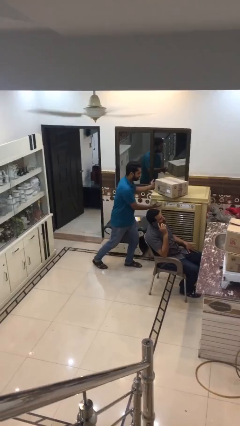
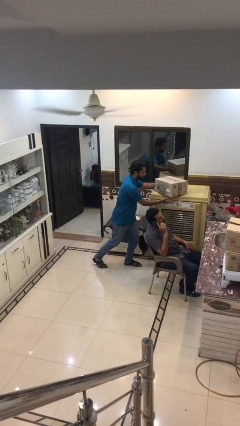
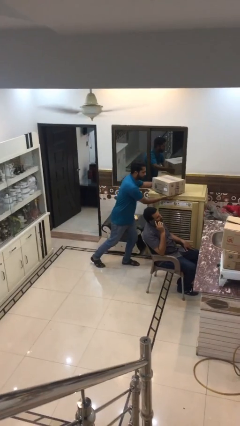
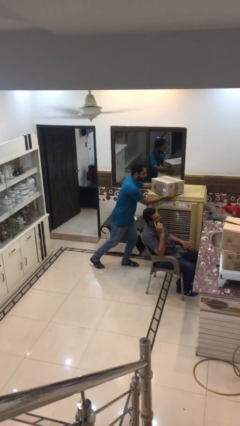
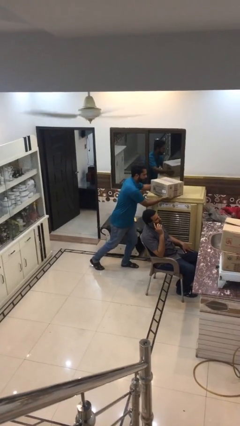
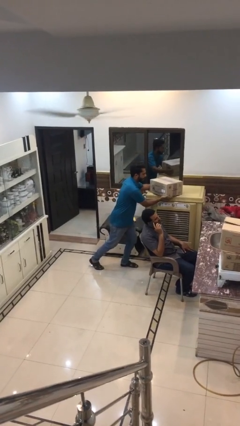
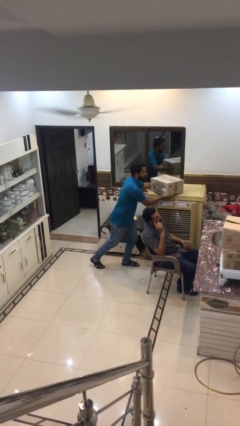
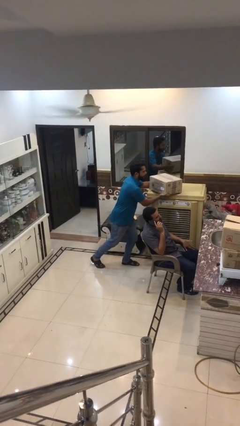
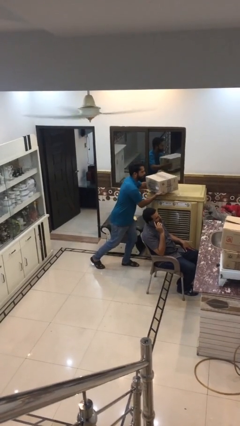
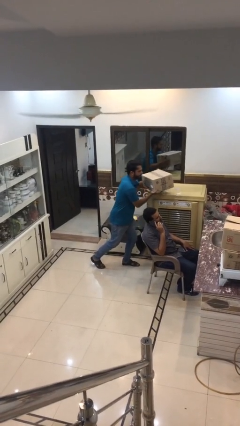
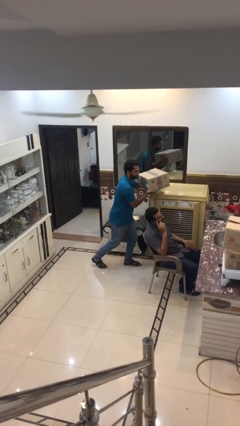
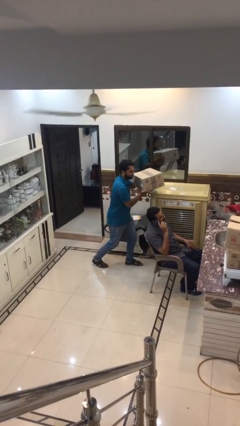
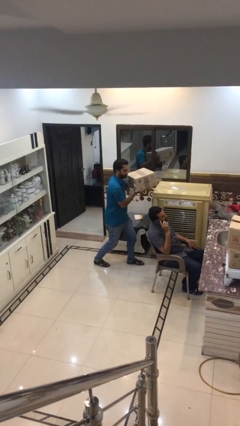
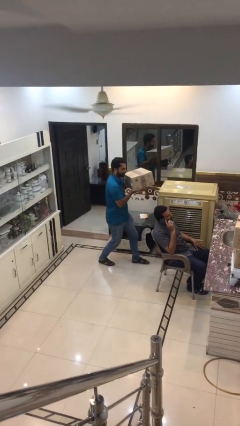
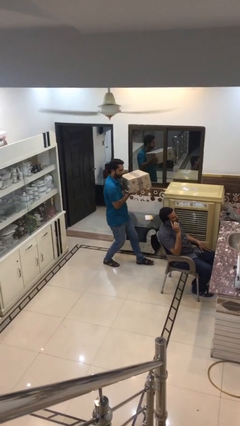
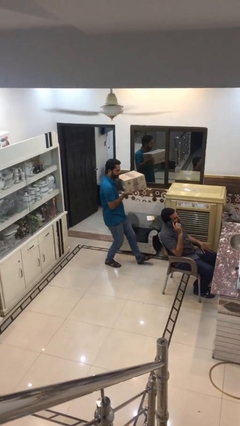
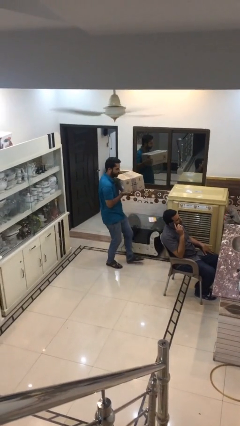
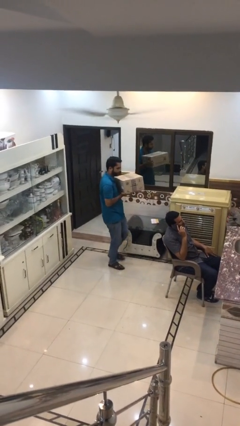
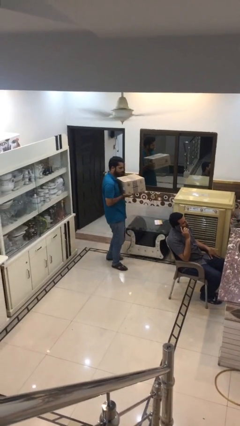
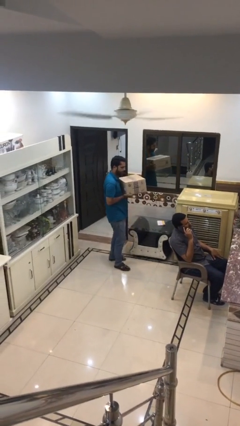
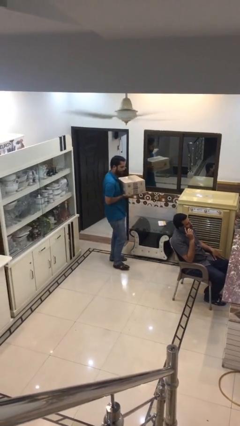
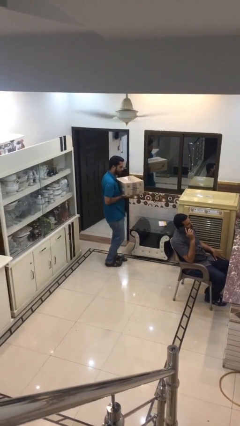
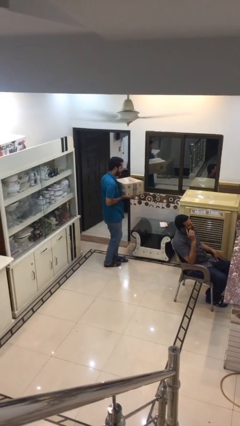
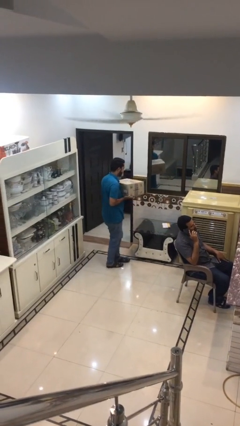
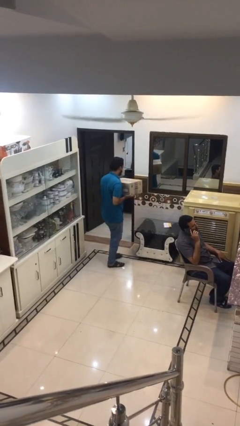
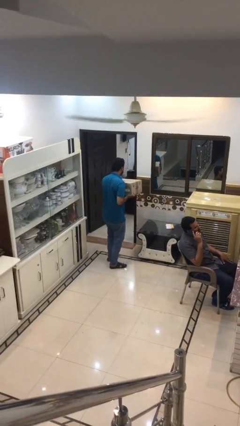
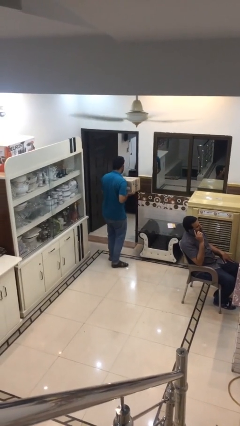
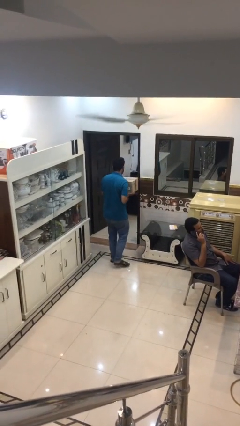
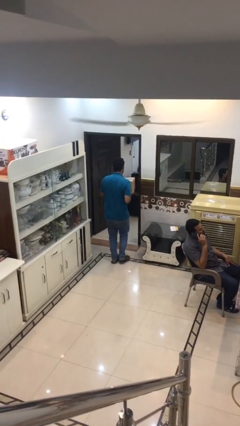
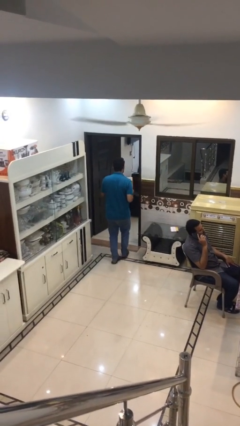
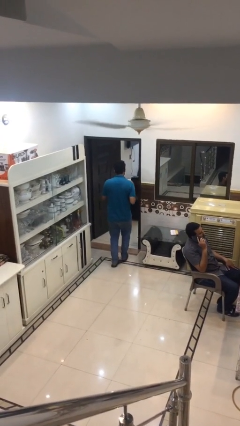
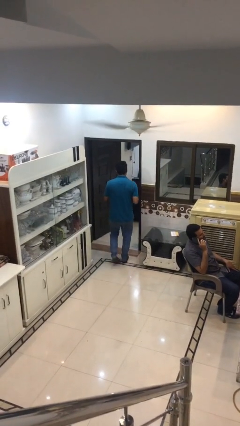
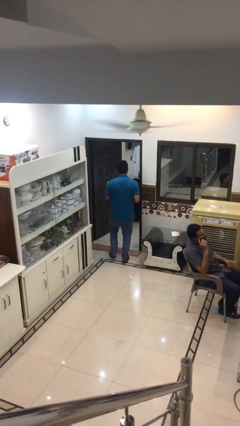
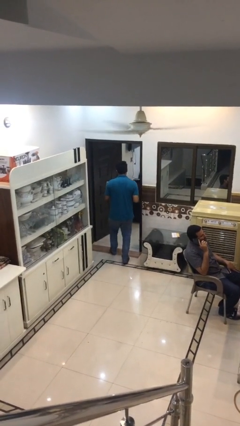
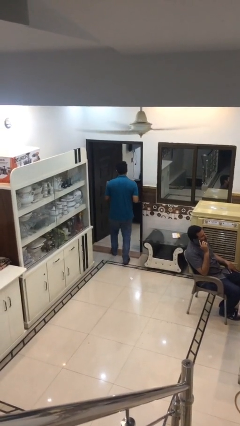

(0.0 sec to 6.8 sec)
person steals object from person

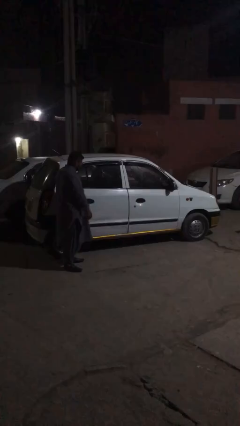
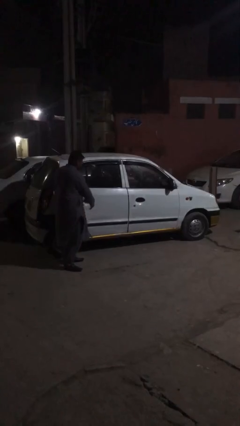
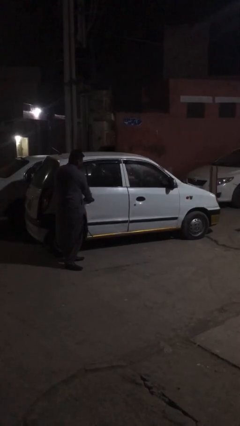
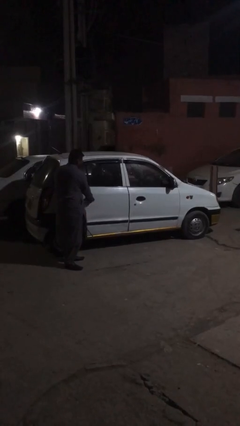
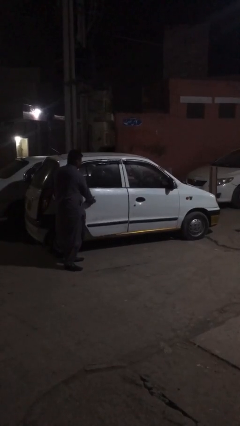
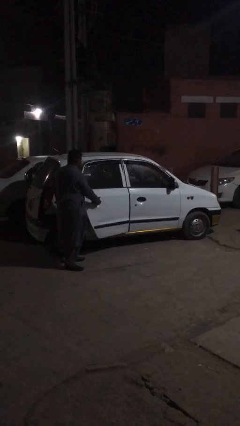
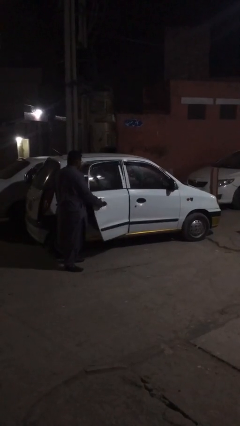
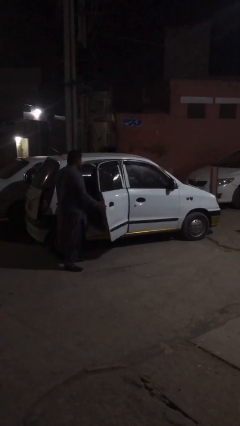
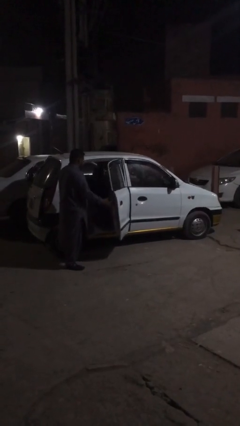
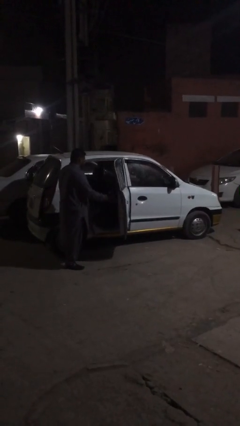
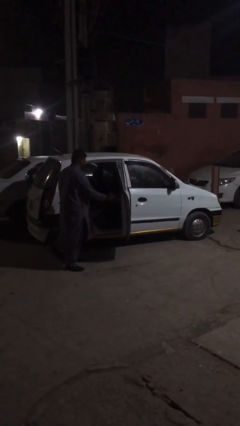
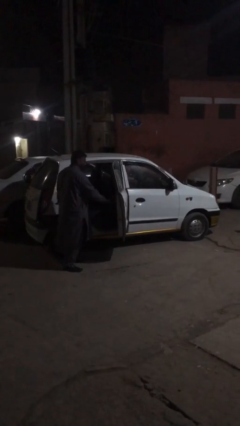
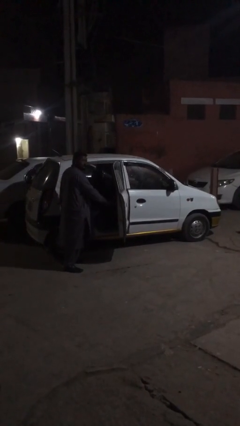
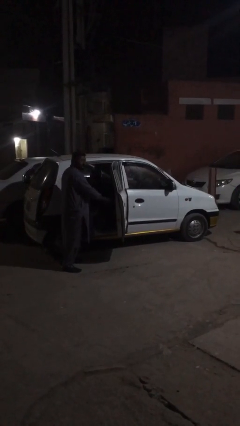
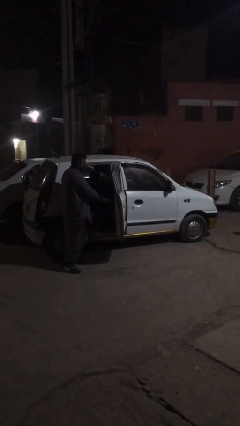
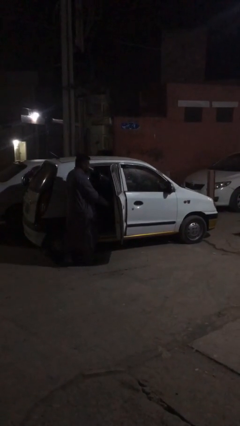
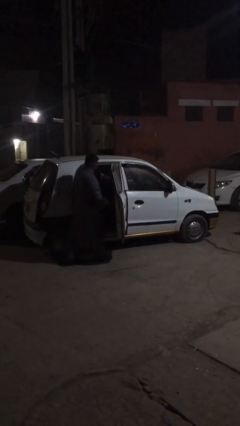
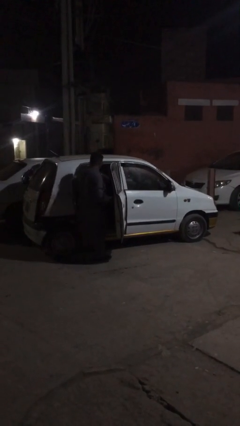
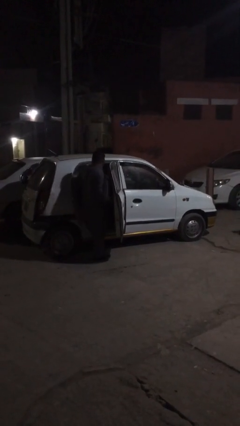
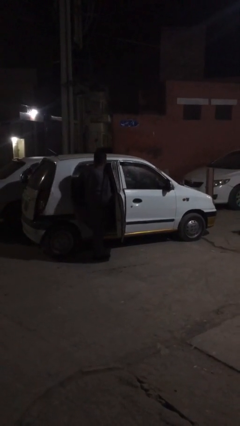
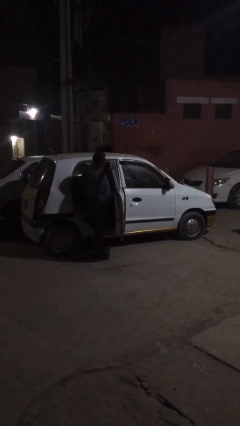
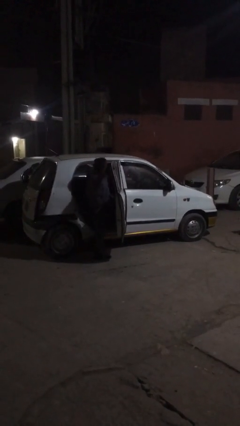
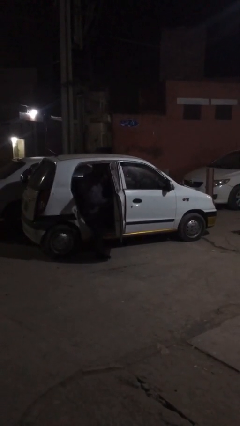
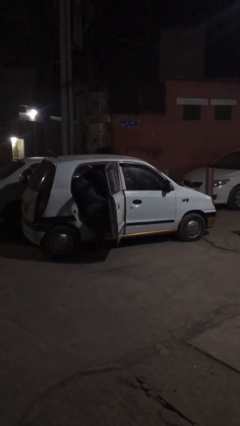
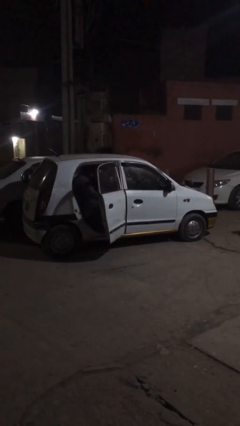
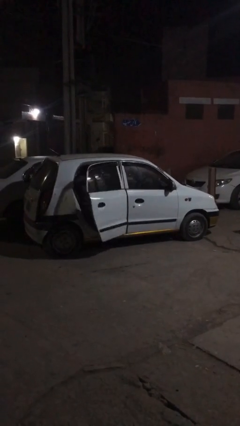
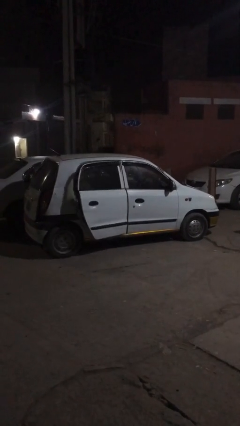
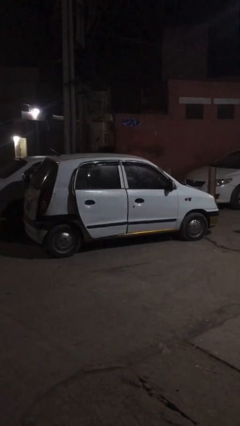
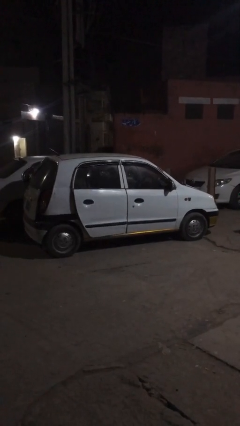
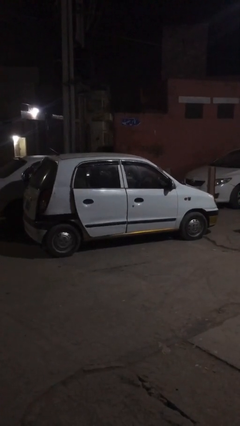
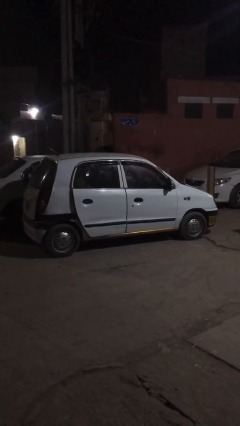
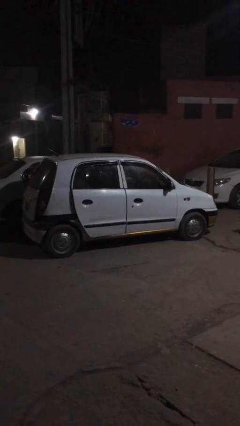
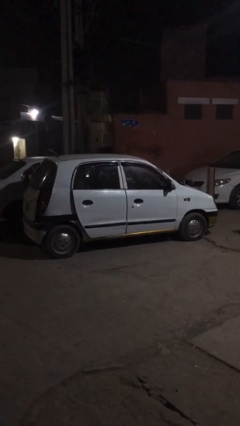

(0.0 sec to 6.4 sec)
car picks up person

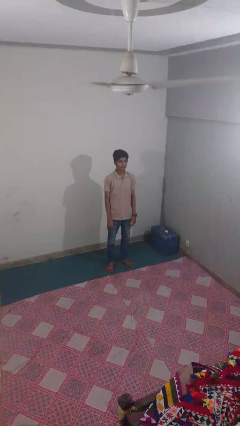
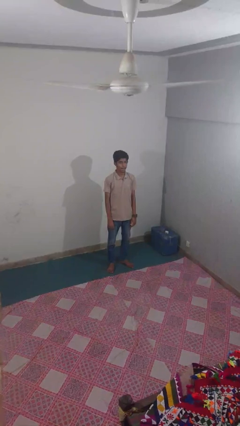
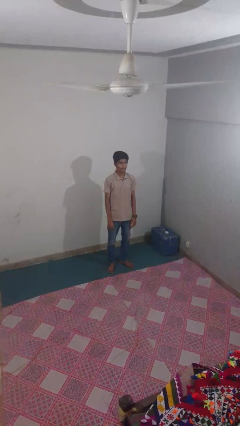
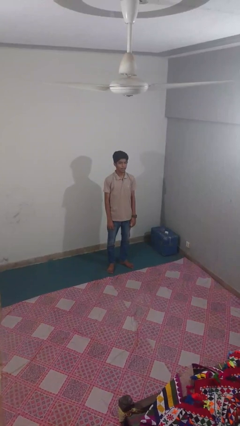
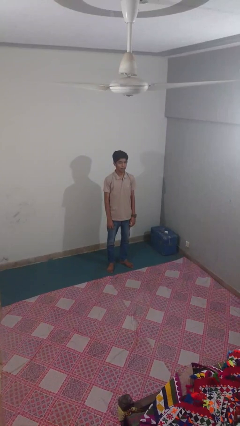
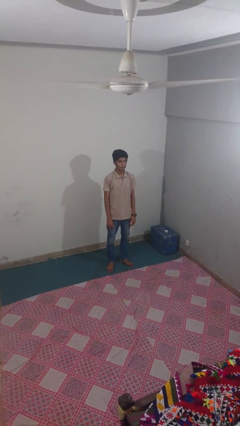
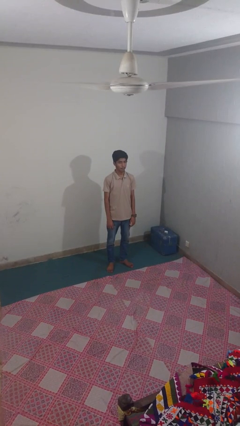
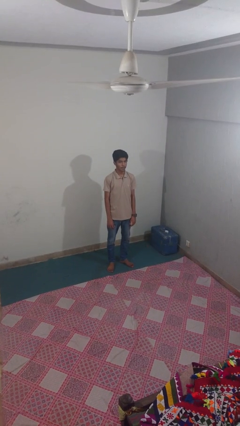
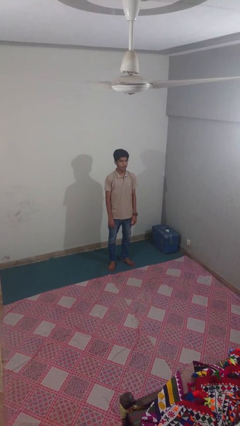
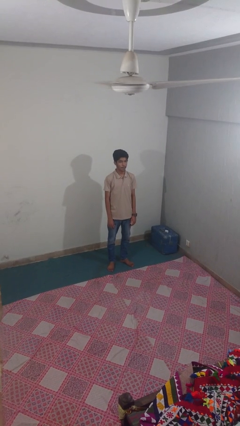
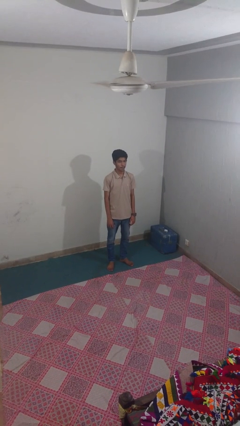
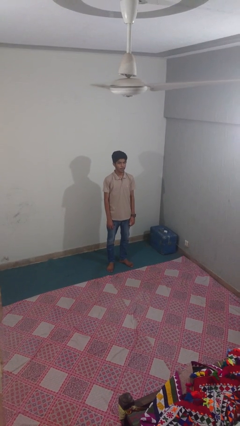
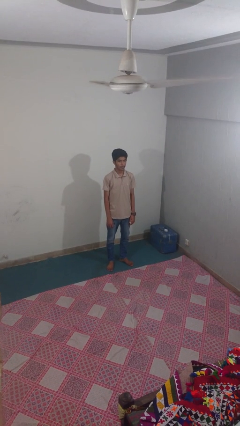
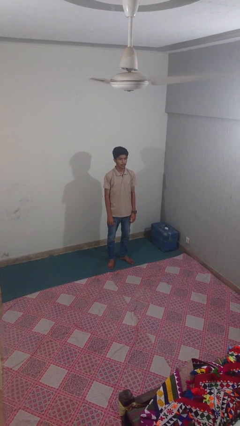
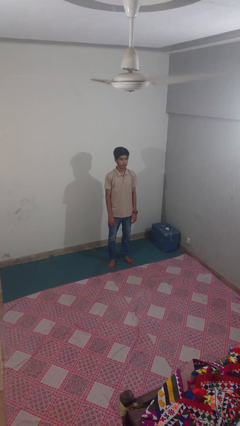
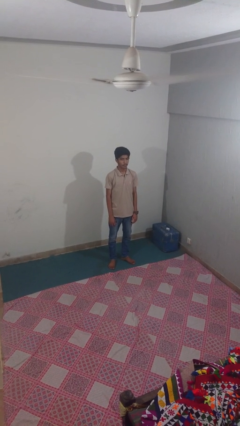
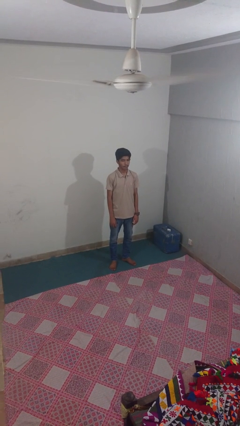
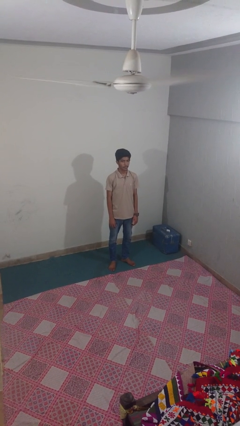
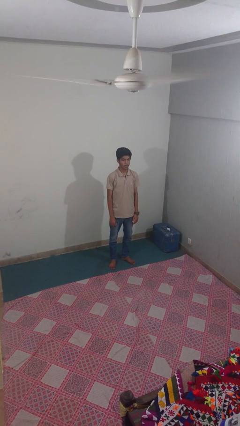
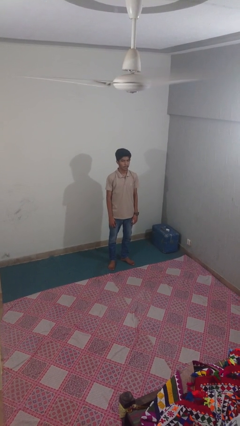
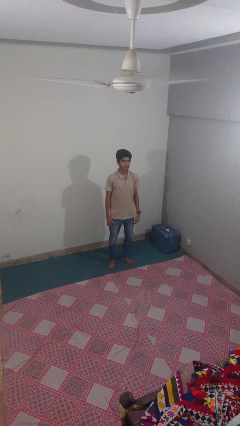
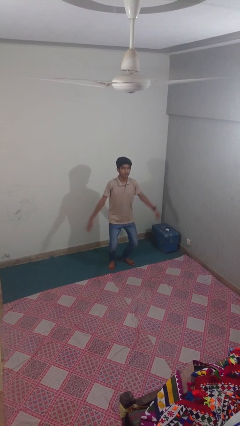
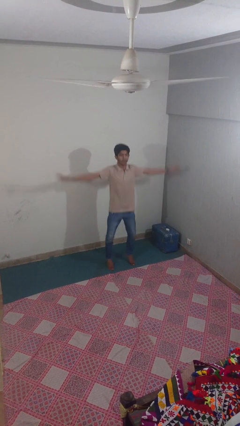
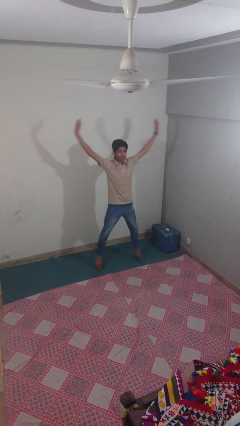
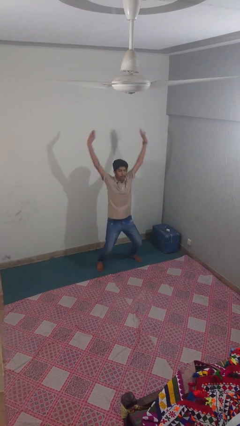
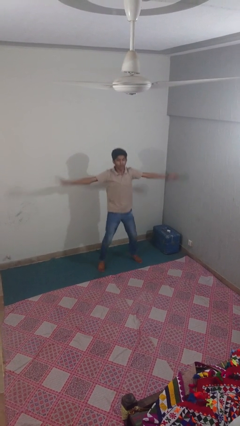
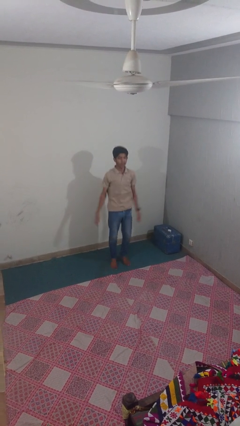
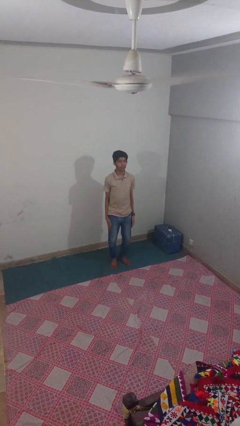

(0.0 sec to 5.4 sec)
person exercises with jumping jacks
